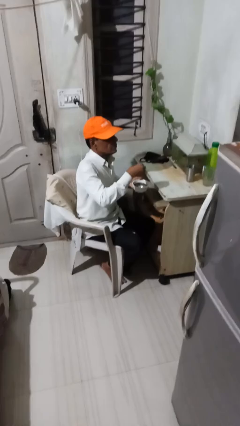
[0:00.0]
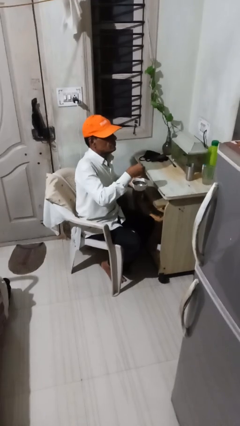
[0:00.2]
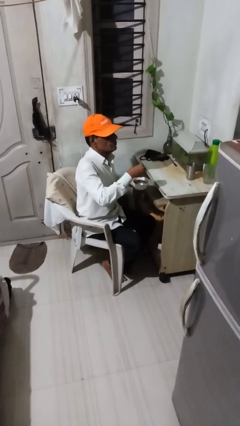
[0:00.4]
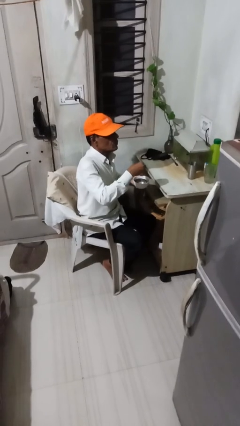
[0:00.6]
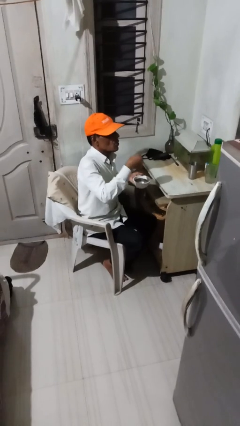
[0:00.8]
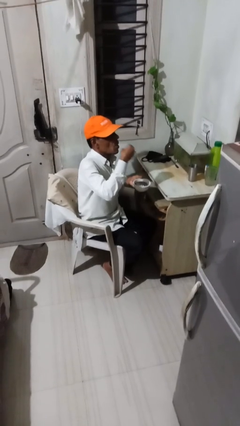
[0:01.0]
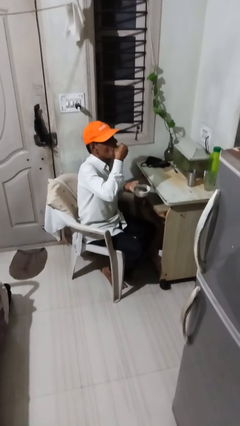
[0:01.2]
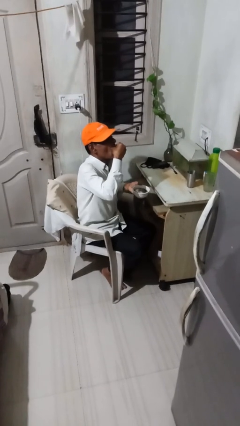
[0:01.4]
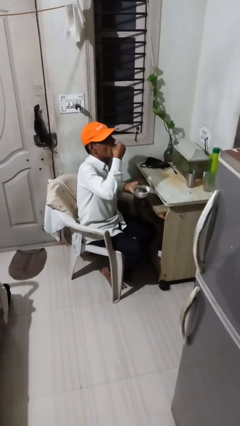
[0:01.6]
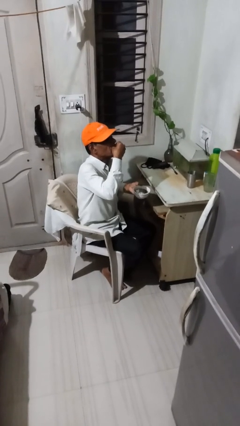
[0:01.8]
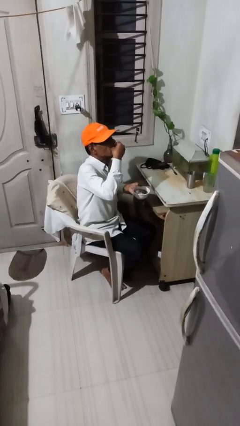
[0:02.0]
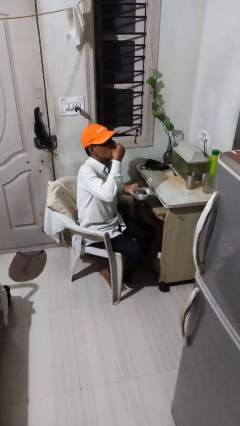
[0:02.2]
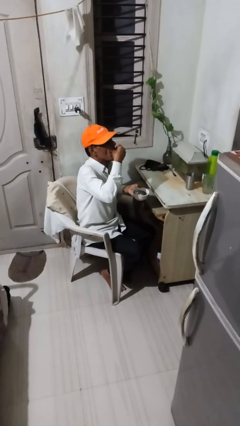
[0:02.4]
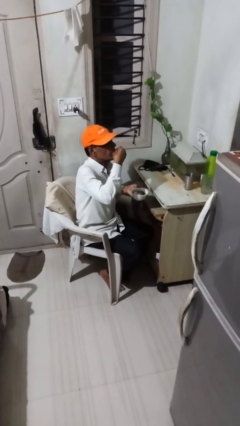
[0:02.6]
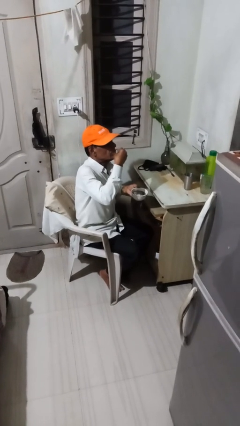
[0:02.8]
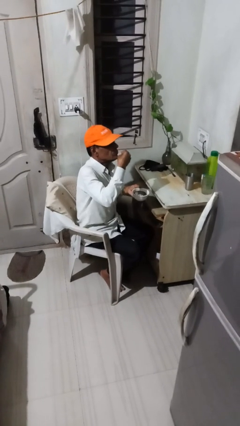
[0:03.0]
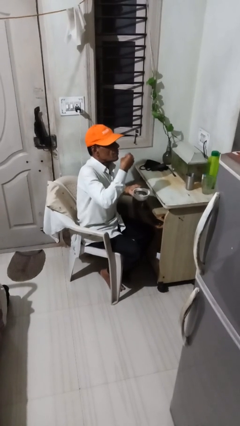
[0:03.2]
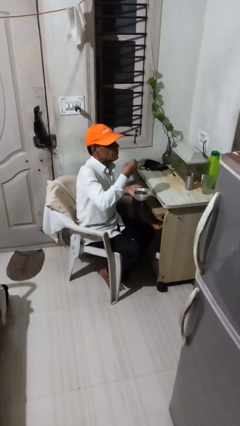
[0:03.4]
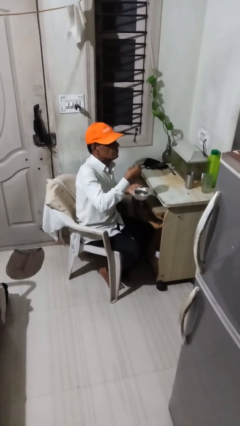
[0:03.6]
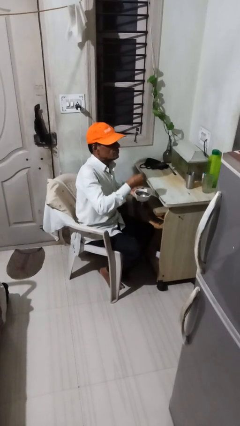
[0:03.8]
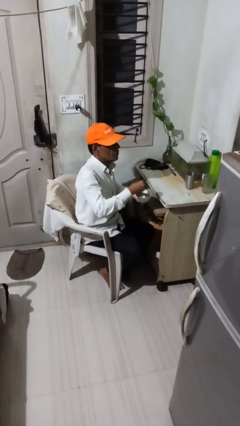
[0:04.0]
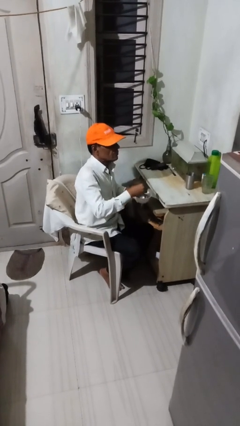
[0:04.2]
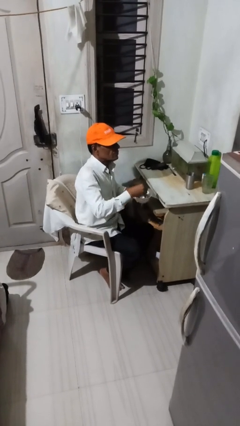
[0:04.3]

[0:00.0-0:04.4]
person eats with hands

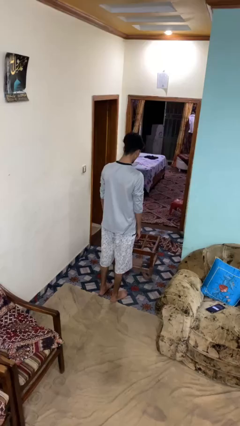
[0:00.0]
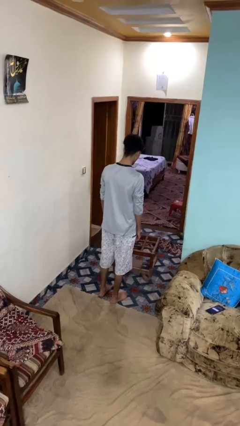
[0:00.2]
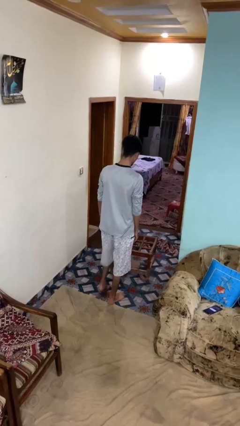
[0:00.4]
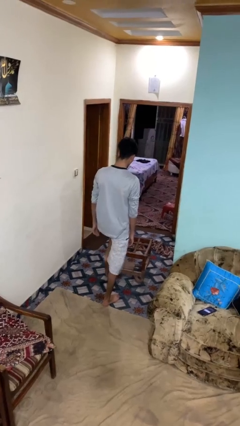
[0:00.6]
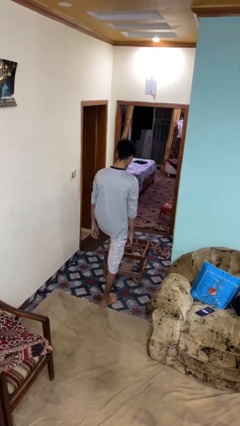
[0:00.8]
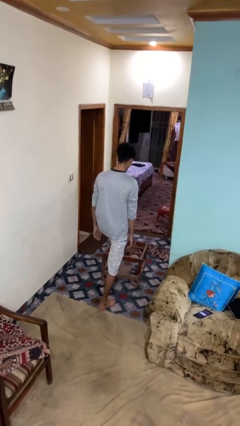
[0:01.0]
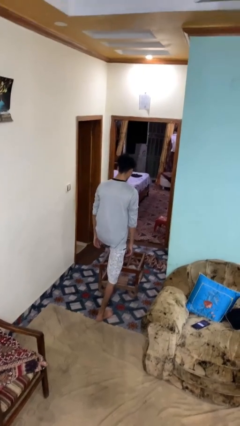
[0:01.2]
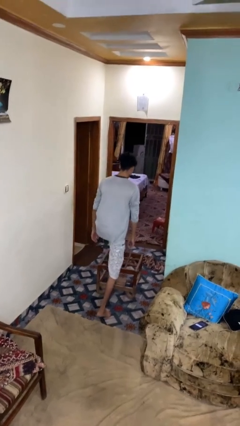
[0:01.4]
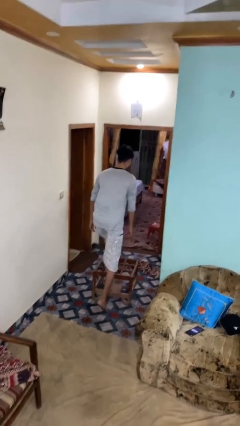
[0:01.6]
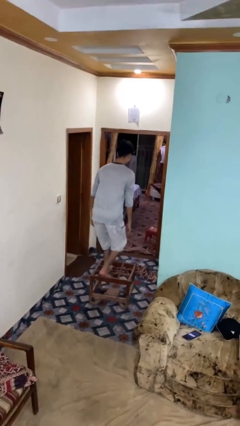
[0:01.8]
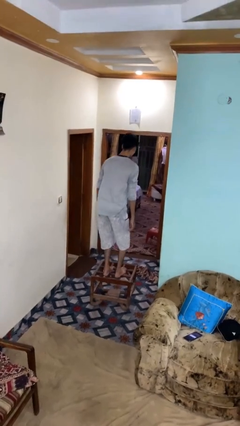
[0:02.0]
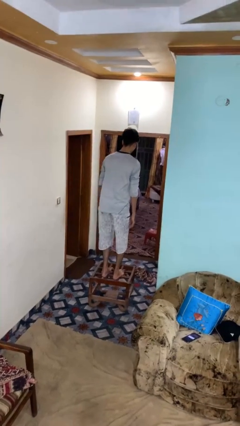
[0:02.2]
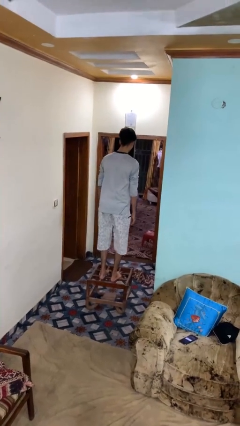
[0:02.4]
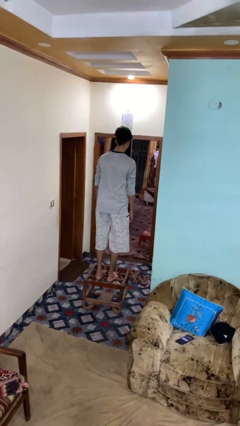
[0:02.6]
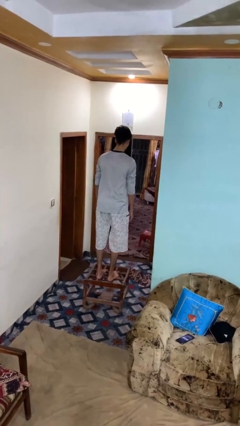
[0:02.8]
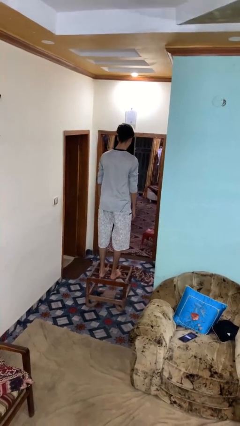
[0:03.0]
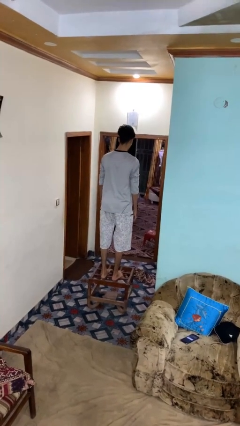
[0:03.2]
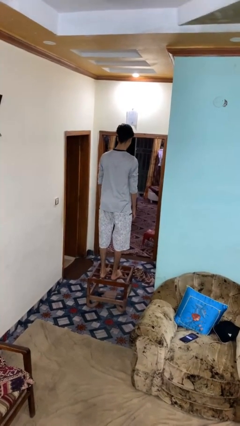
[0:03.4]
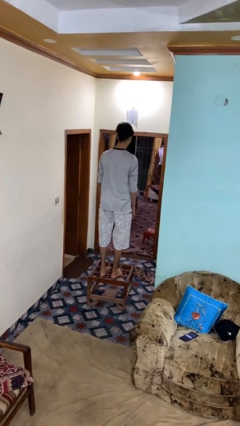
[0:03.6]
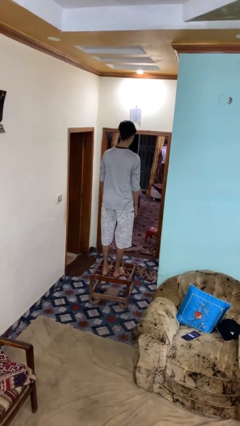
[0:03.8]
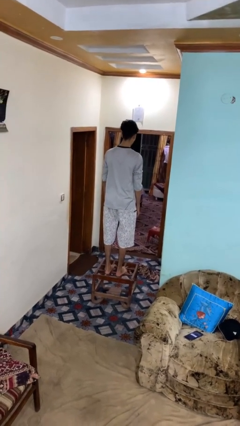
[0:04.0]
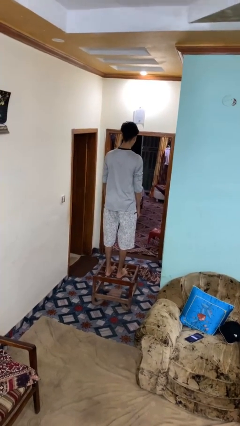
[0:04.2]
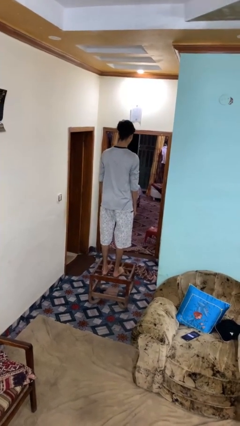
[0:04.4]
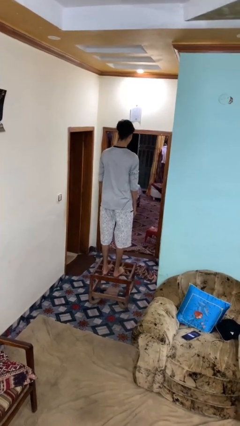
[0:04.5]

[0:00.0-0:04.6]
person climbs on table

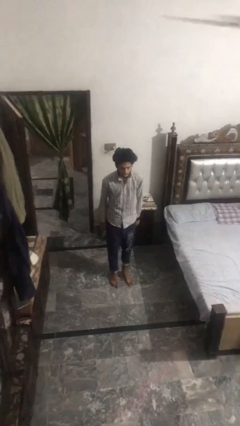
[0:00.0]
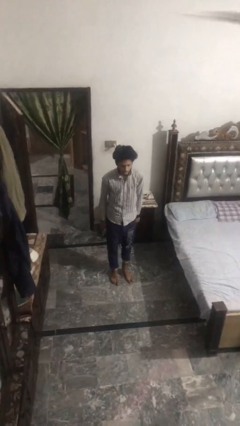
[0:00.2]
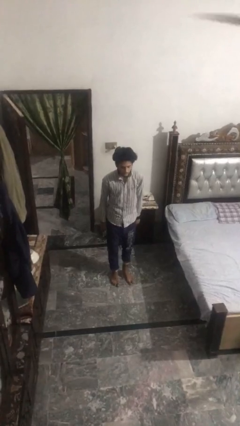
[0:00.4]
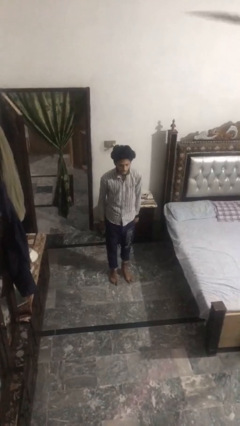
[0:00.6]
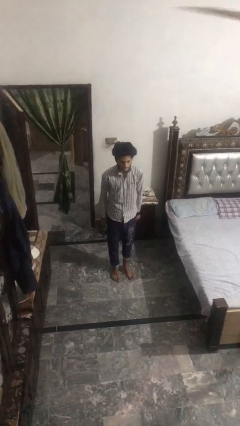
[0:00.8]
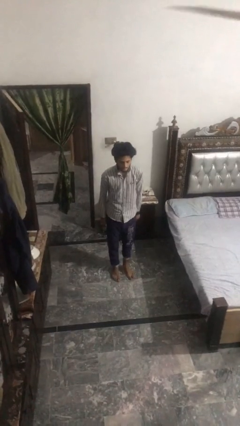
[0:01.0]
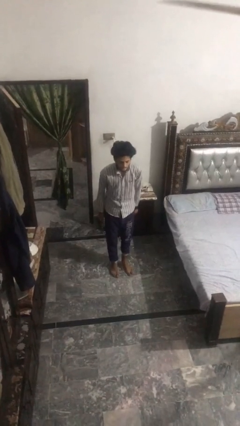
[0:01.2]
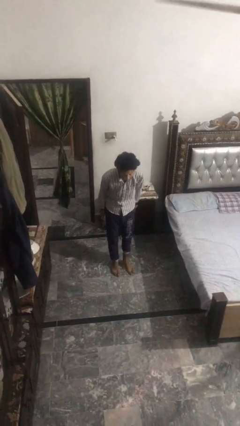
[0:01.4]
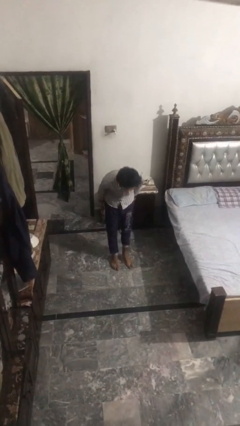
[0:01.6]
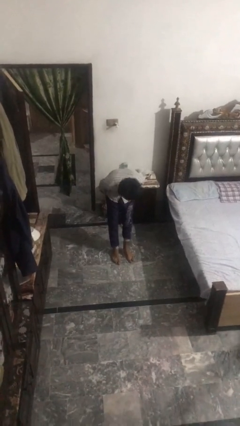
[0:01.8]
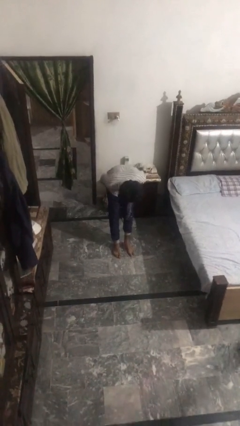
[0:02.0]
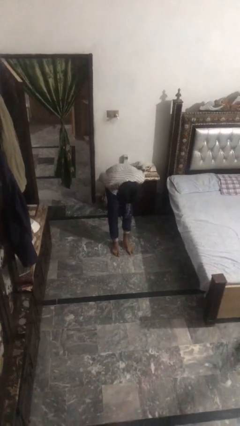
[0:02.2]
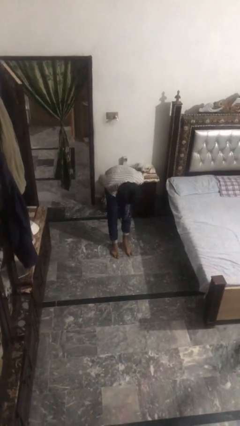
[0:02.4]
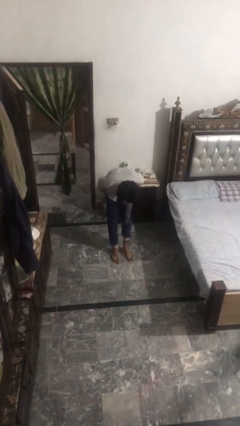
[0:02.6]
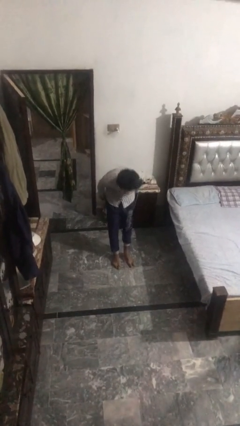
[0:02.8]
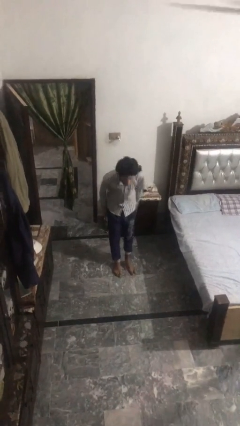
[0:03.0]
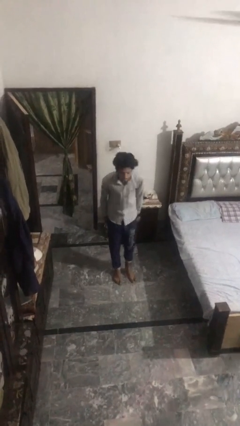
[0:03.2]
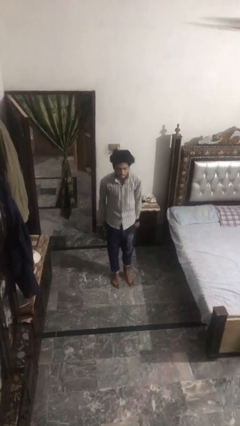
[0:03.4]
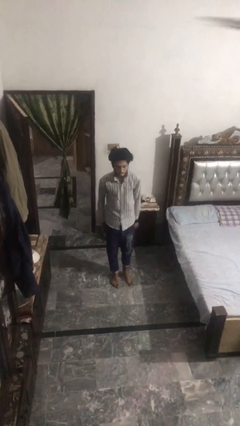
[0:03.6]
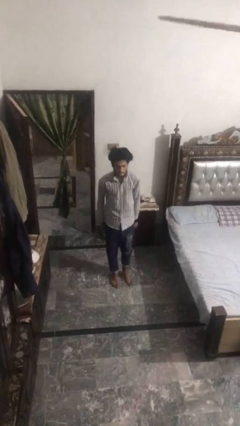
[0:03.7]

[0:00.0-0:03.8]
person bows

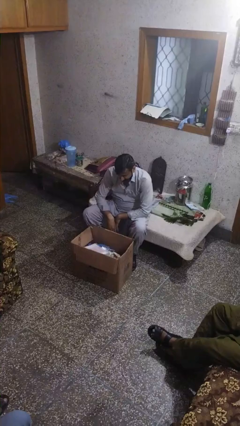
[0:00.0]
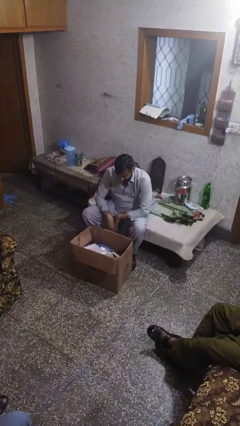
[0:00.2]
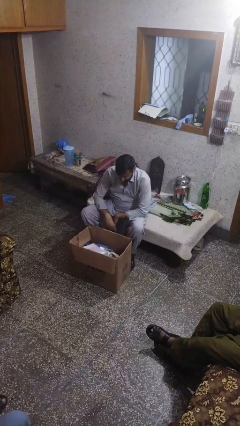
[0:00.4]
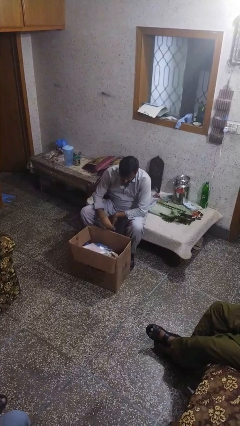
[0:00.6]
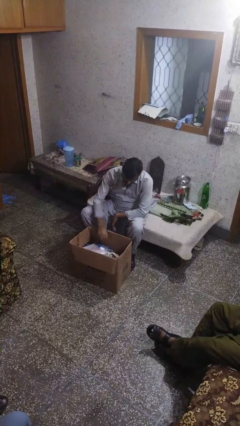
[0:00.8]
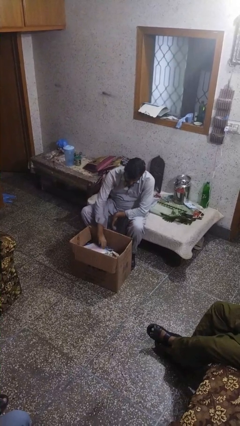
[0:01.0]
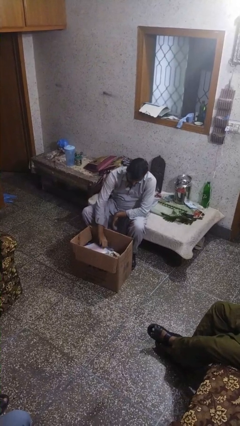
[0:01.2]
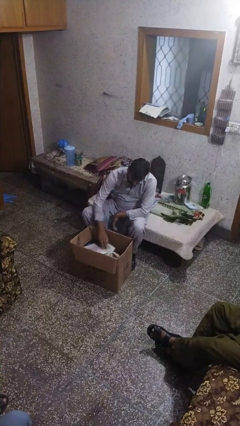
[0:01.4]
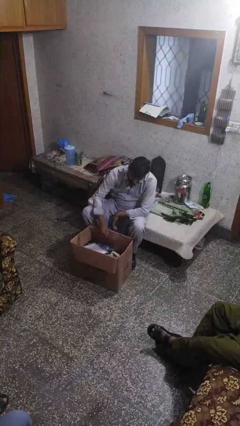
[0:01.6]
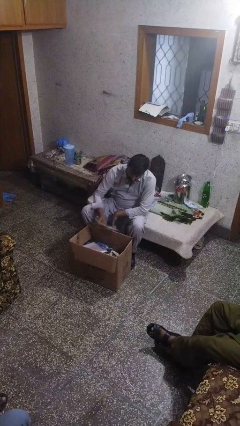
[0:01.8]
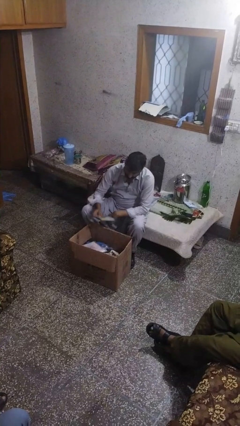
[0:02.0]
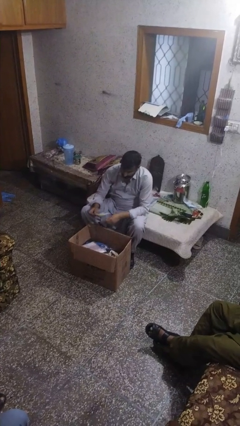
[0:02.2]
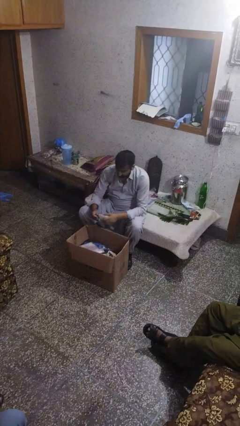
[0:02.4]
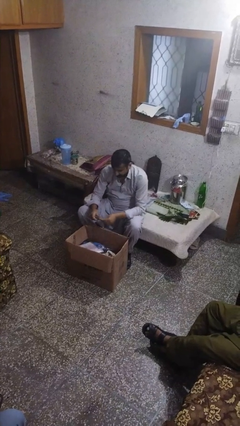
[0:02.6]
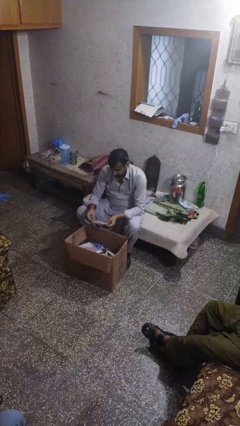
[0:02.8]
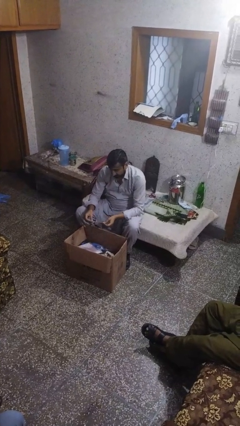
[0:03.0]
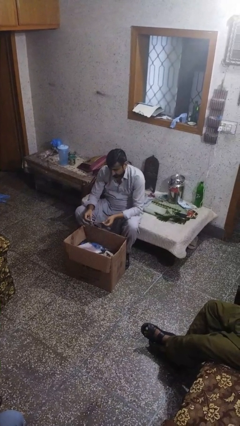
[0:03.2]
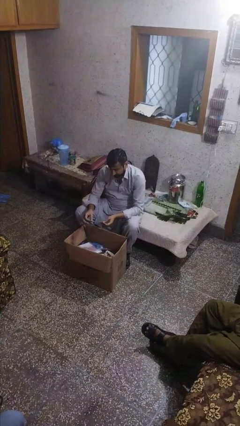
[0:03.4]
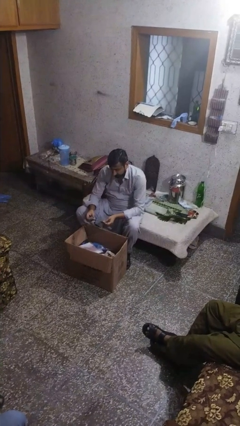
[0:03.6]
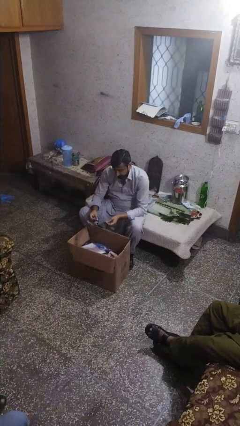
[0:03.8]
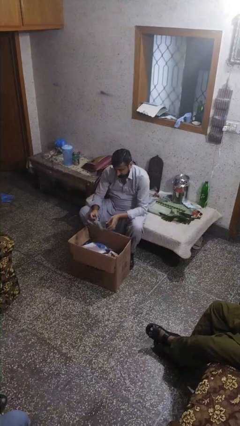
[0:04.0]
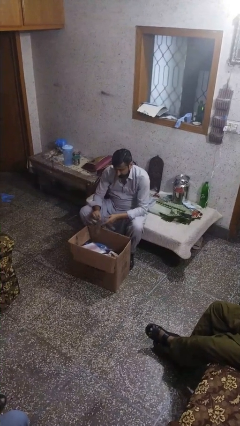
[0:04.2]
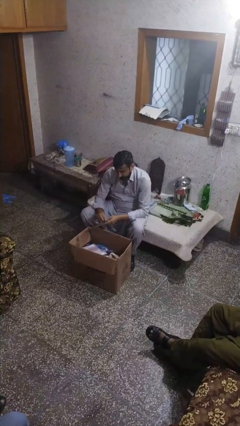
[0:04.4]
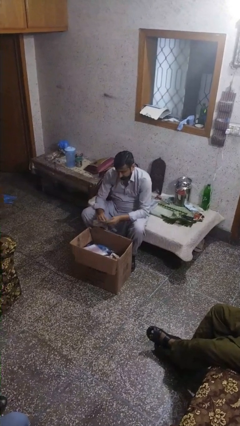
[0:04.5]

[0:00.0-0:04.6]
person takes object from box

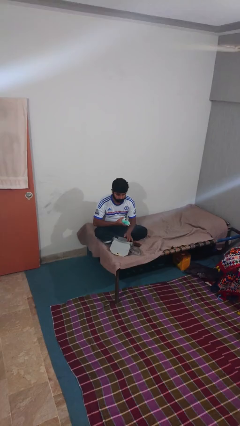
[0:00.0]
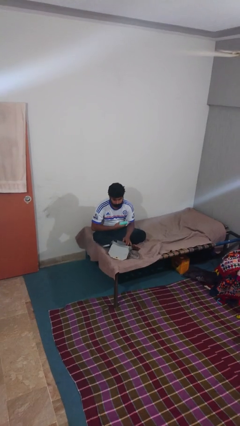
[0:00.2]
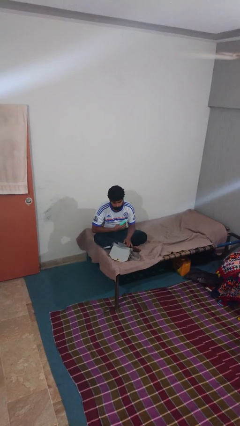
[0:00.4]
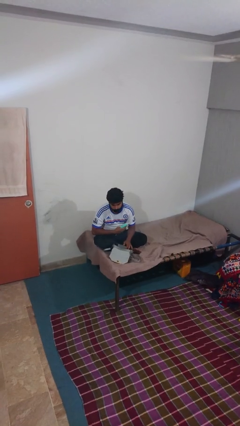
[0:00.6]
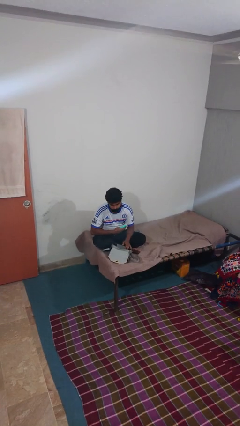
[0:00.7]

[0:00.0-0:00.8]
person takes object from purse
